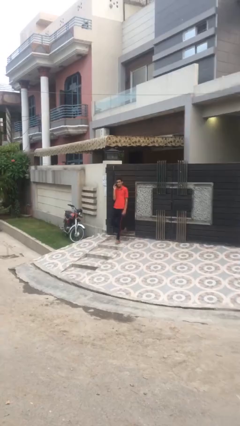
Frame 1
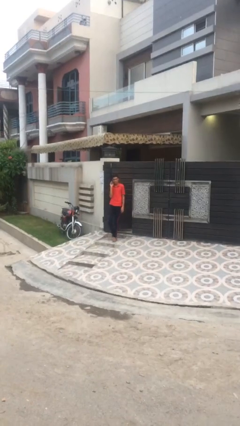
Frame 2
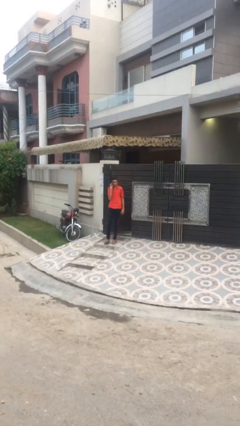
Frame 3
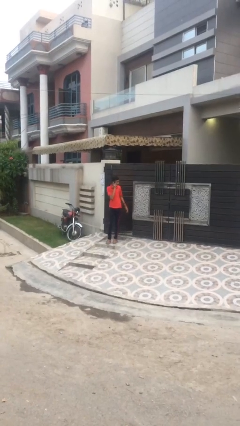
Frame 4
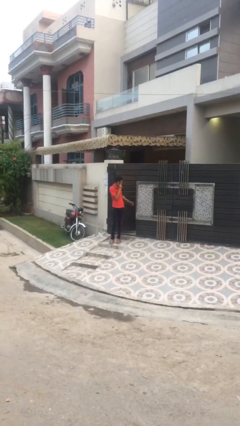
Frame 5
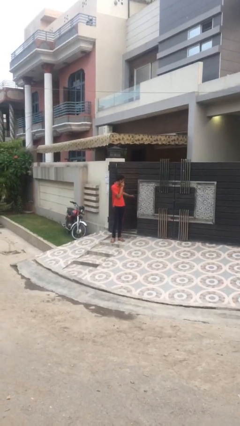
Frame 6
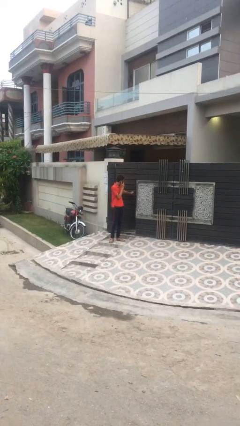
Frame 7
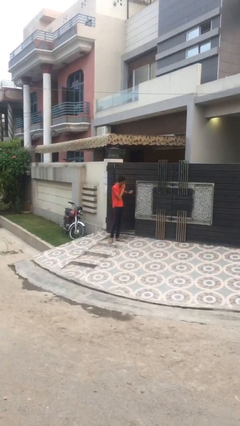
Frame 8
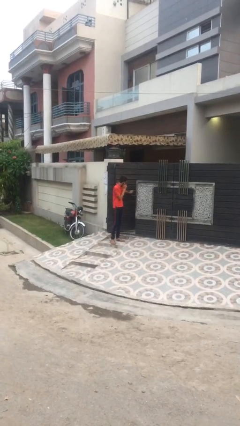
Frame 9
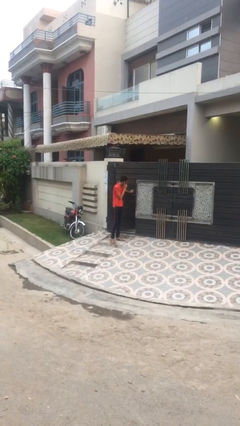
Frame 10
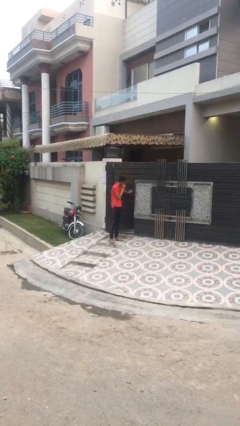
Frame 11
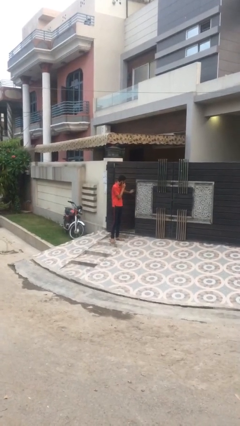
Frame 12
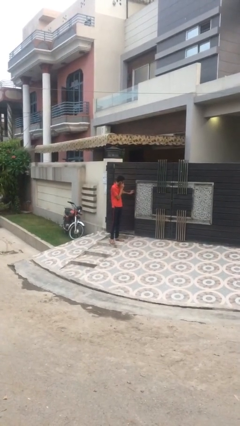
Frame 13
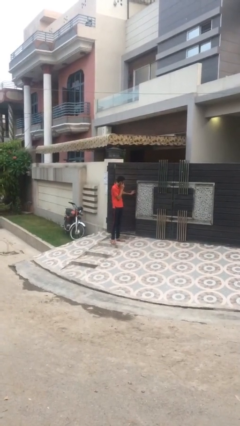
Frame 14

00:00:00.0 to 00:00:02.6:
person closes facility door

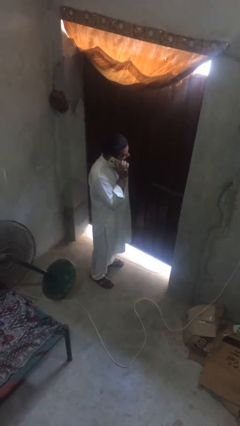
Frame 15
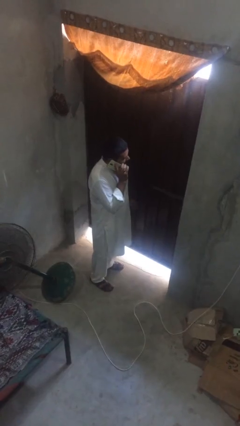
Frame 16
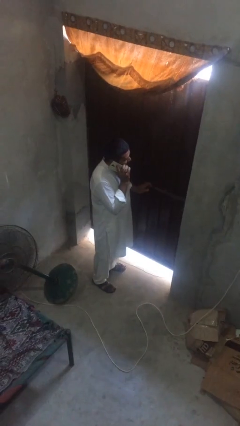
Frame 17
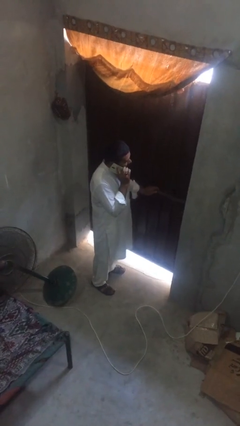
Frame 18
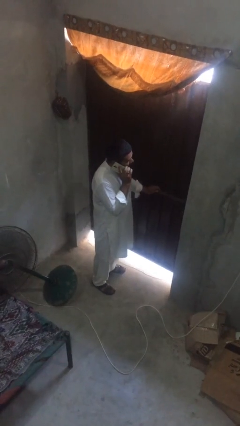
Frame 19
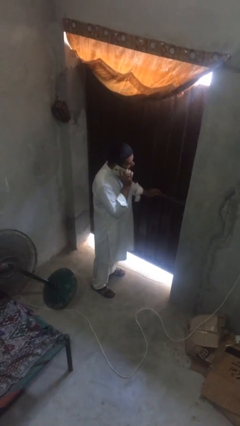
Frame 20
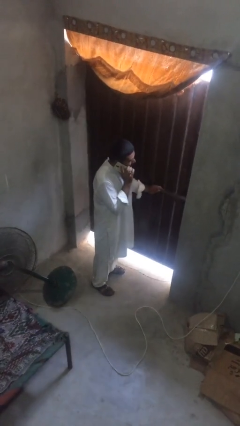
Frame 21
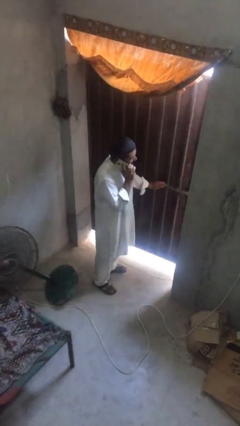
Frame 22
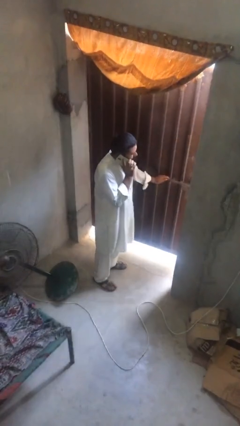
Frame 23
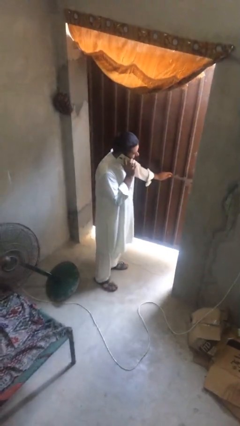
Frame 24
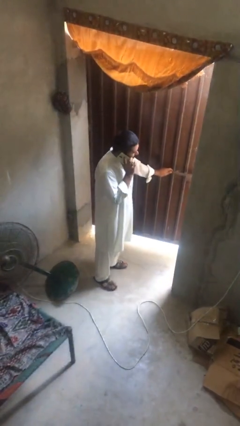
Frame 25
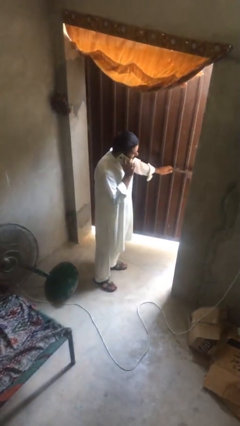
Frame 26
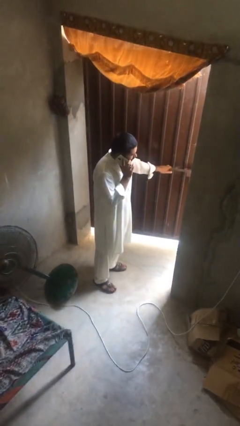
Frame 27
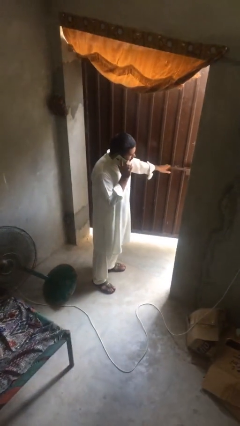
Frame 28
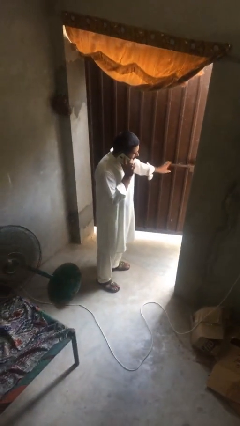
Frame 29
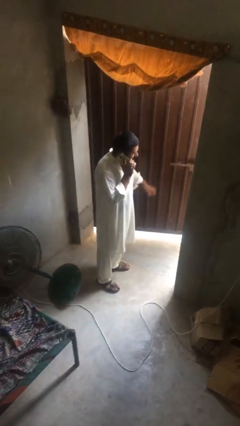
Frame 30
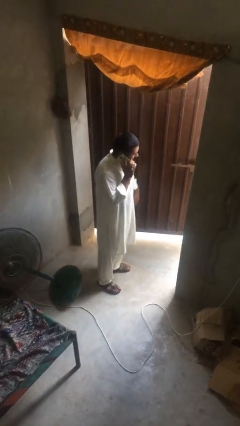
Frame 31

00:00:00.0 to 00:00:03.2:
person opens facility door

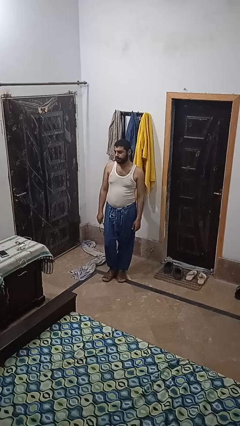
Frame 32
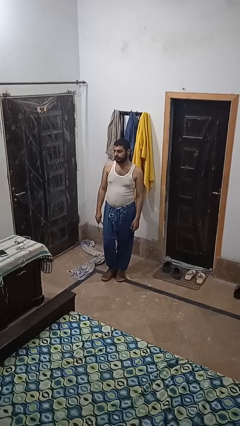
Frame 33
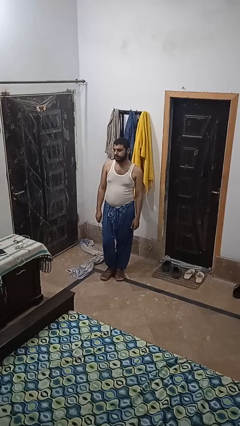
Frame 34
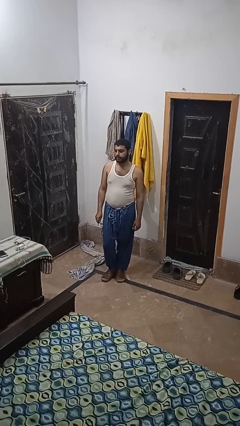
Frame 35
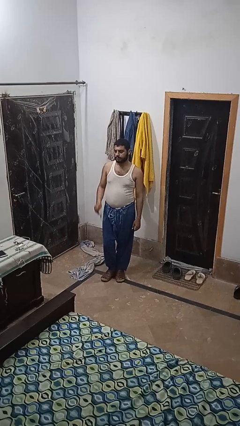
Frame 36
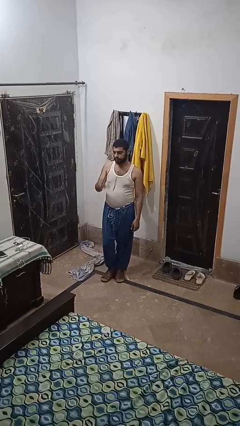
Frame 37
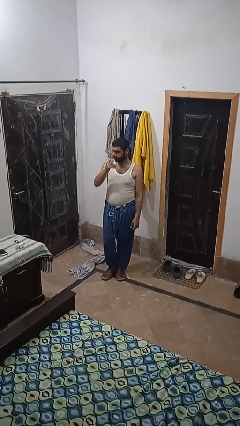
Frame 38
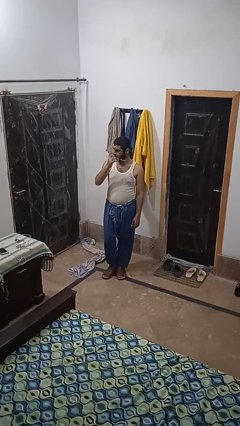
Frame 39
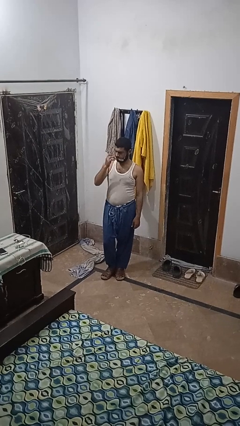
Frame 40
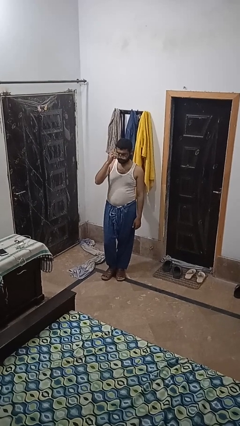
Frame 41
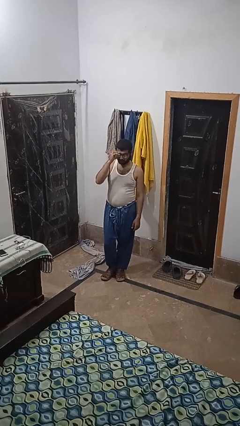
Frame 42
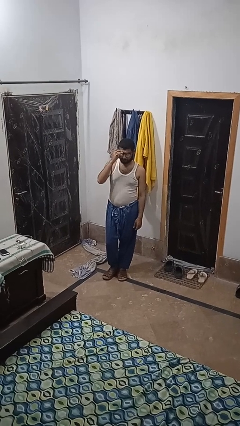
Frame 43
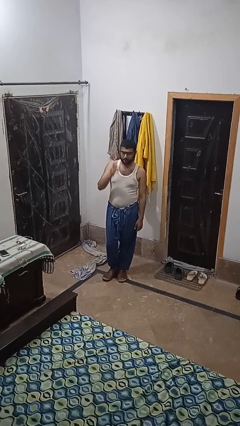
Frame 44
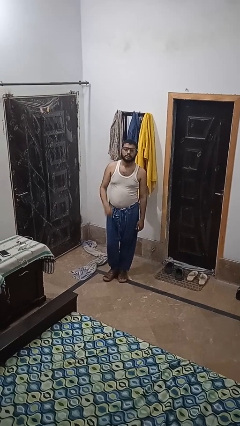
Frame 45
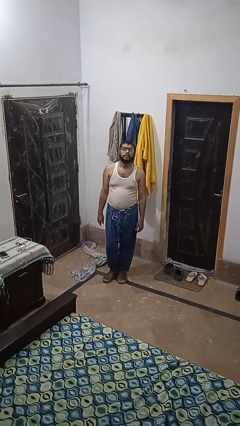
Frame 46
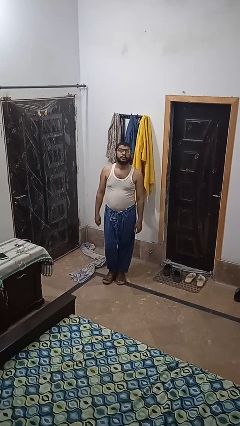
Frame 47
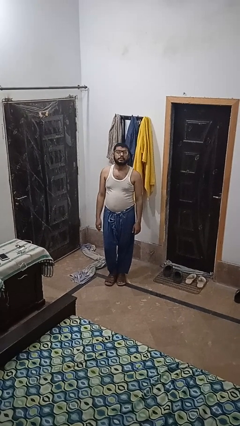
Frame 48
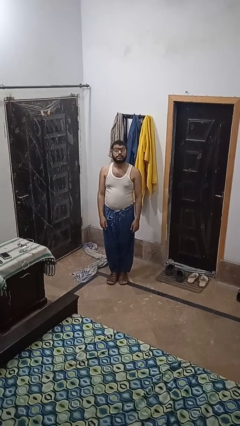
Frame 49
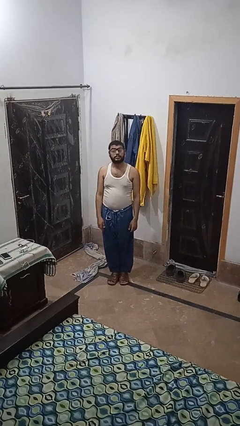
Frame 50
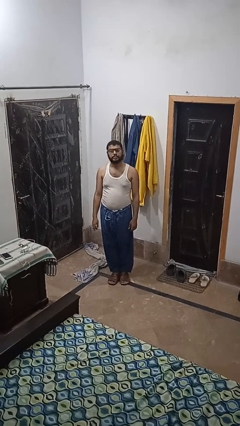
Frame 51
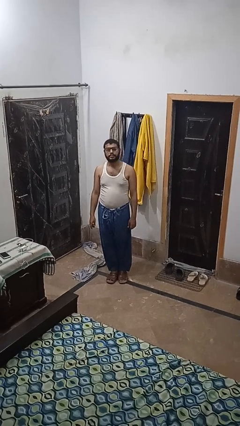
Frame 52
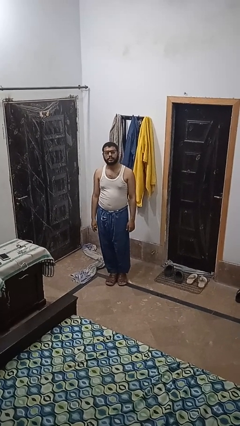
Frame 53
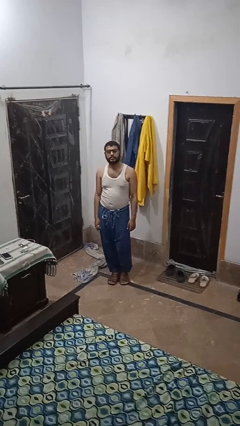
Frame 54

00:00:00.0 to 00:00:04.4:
person puts on glasses

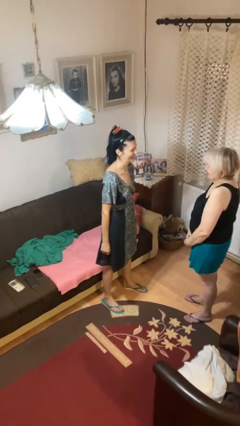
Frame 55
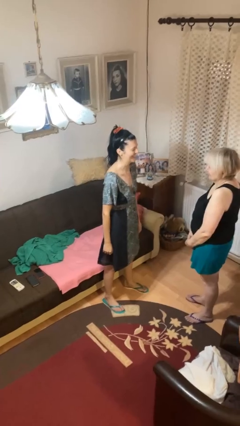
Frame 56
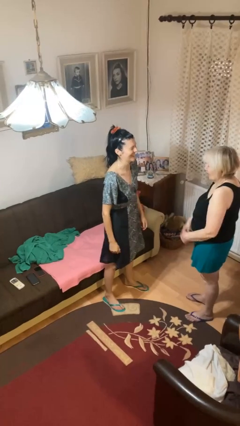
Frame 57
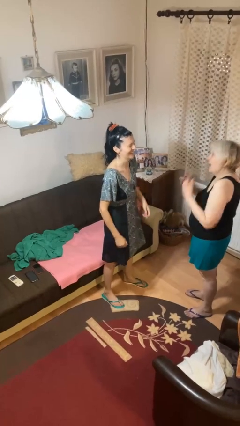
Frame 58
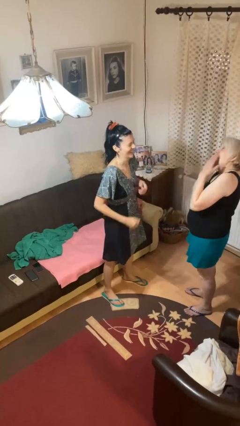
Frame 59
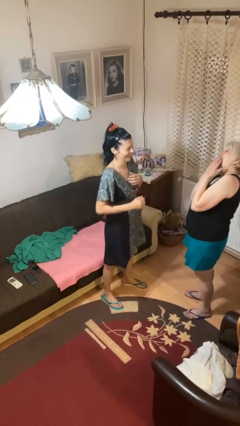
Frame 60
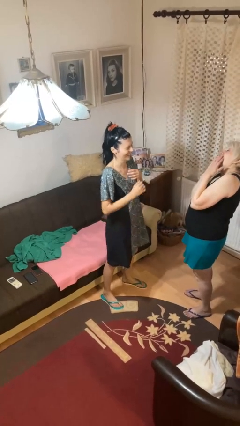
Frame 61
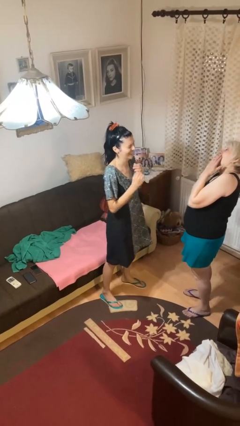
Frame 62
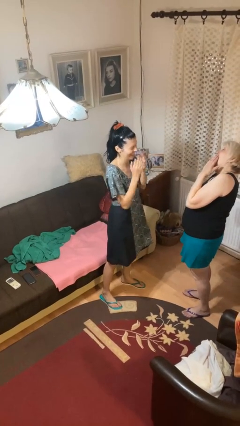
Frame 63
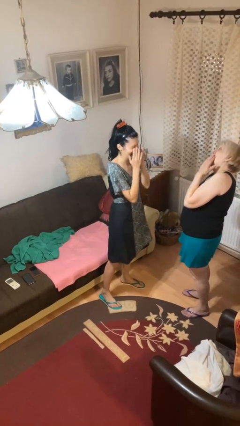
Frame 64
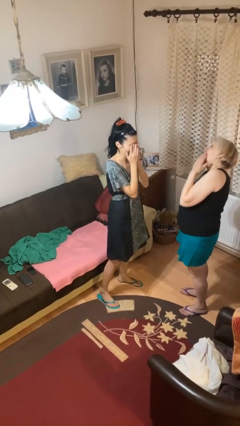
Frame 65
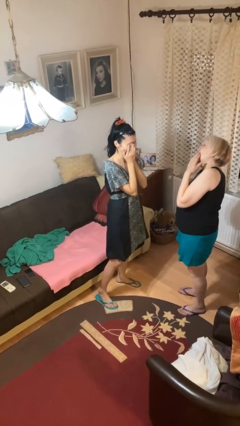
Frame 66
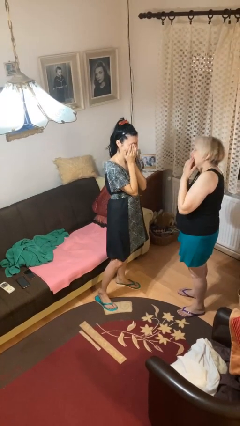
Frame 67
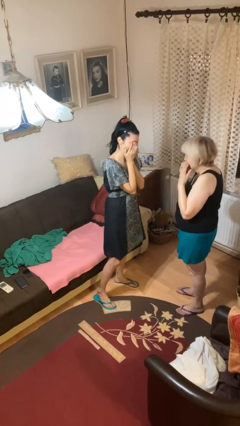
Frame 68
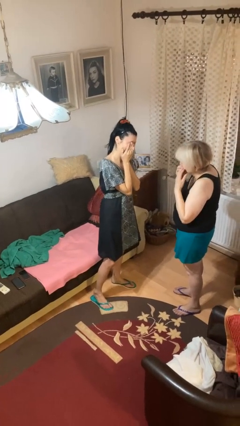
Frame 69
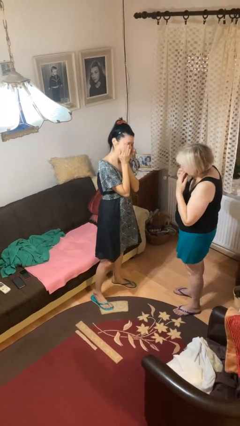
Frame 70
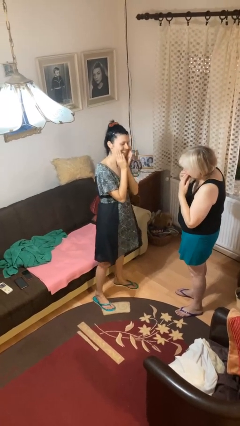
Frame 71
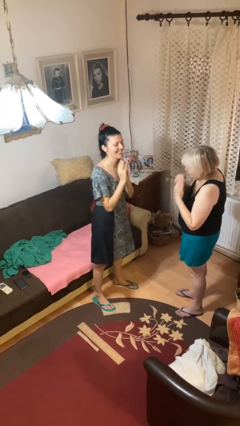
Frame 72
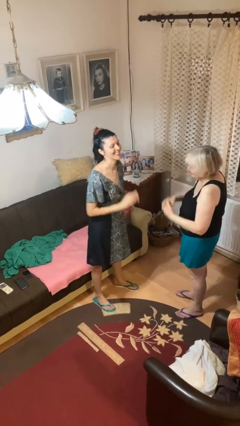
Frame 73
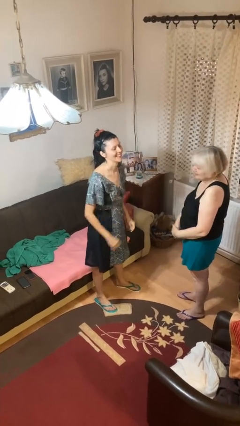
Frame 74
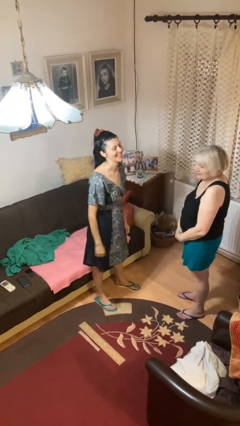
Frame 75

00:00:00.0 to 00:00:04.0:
person laughs with person

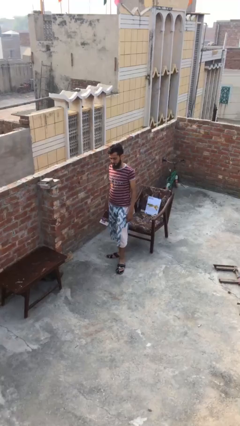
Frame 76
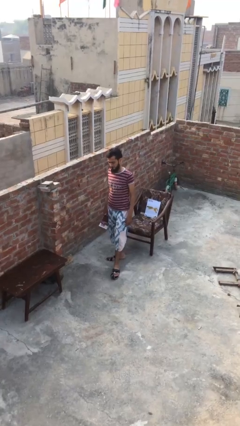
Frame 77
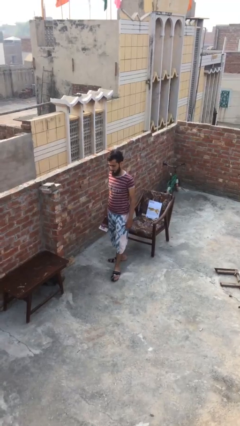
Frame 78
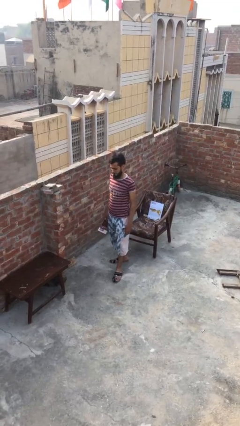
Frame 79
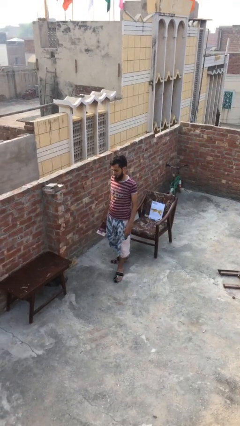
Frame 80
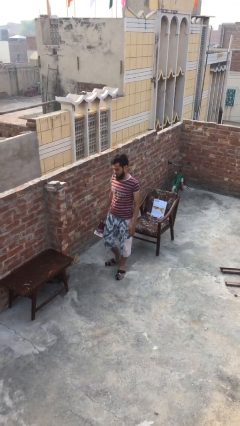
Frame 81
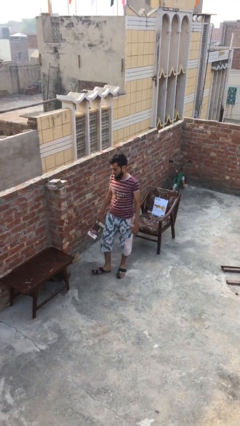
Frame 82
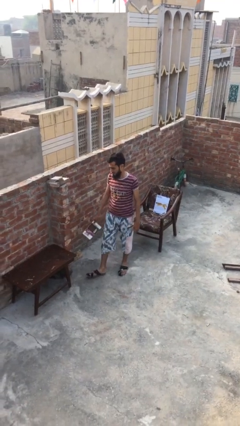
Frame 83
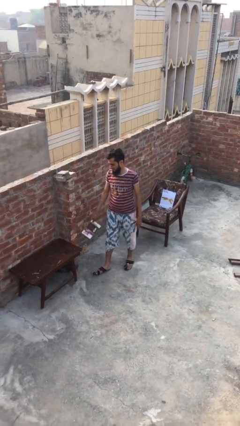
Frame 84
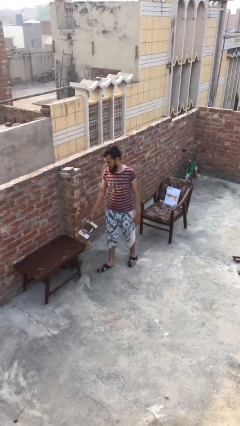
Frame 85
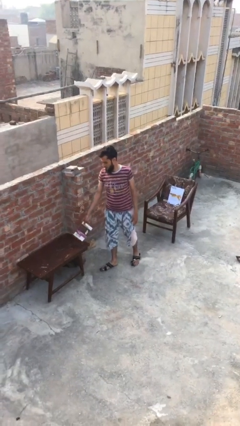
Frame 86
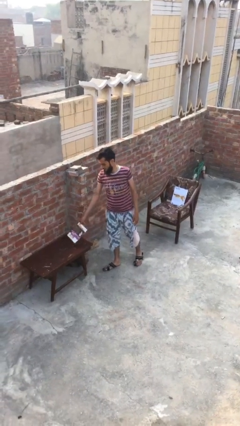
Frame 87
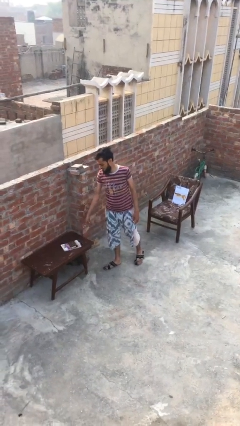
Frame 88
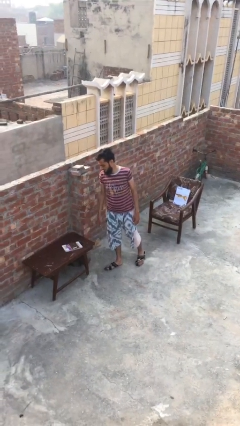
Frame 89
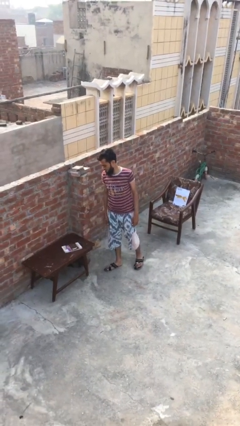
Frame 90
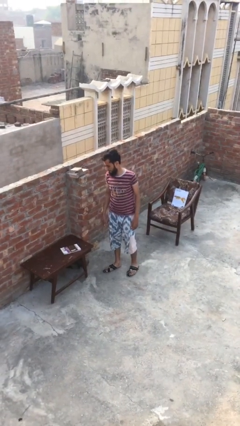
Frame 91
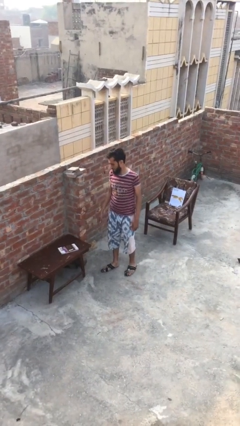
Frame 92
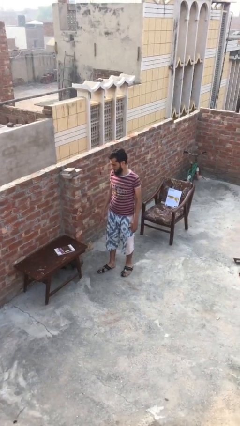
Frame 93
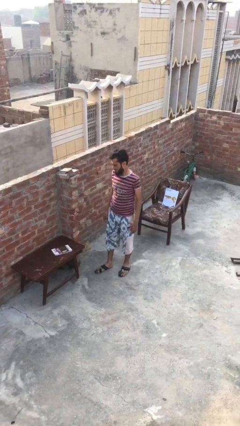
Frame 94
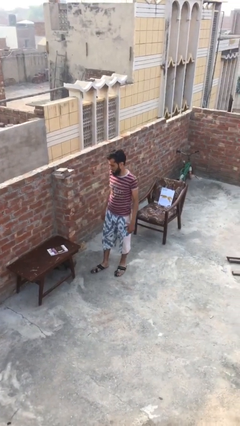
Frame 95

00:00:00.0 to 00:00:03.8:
person puts down object on table
